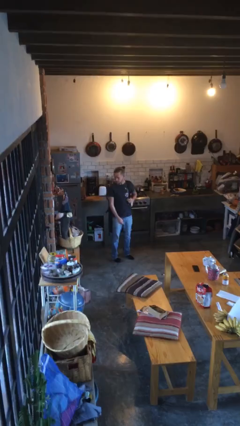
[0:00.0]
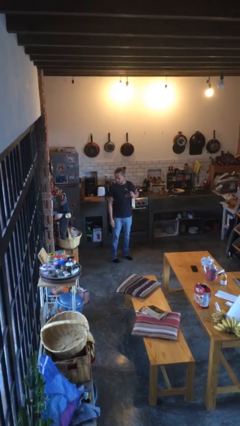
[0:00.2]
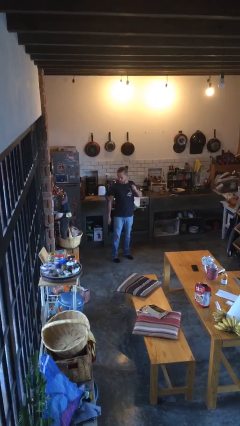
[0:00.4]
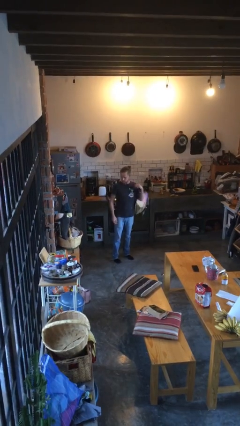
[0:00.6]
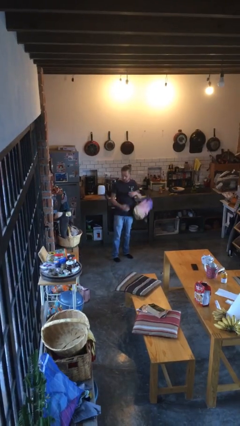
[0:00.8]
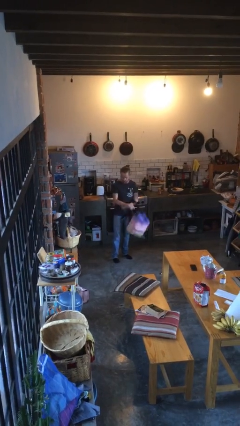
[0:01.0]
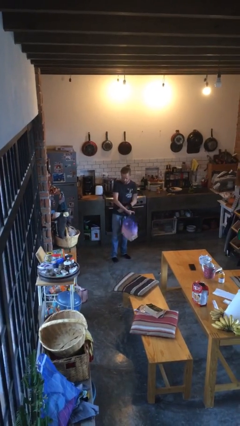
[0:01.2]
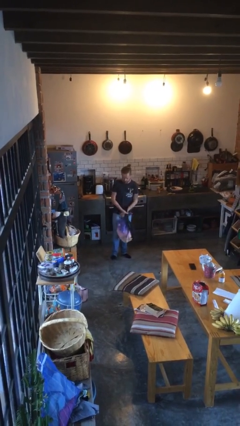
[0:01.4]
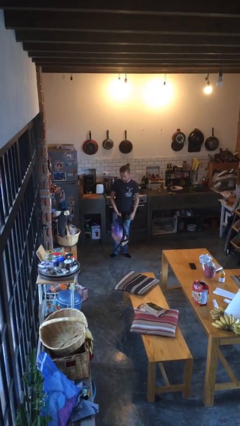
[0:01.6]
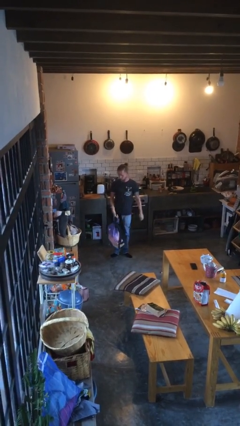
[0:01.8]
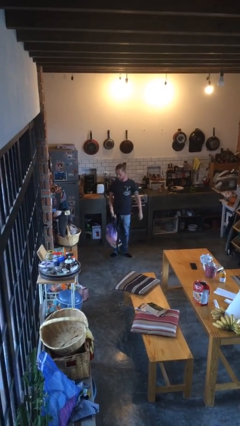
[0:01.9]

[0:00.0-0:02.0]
person takes off backpack

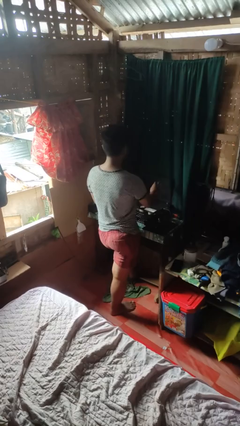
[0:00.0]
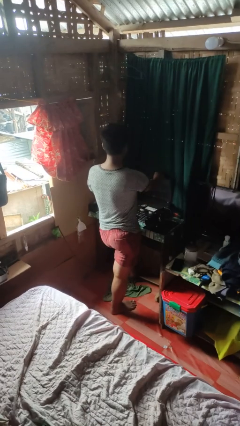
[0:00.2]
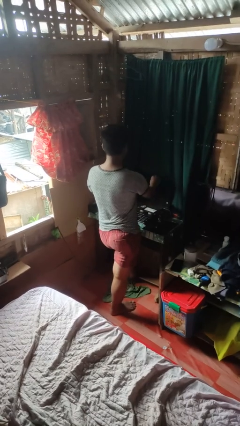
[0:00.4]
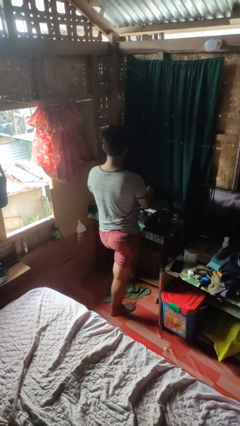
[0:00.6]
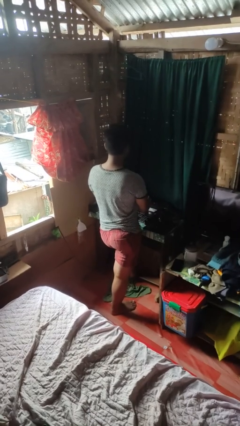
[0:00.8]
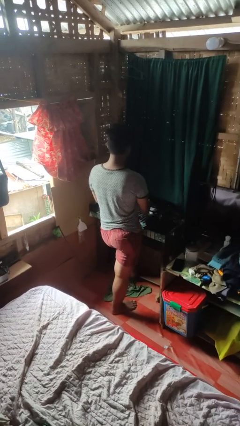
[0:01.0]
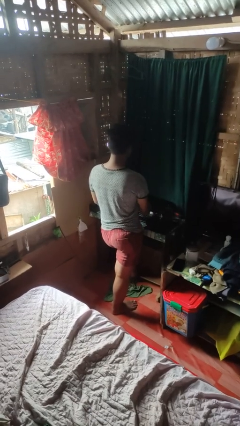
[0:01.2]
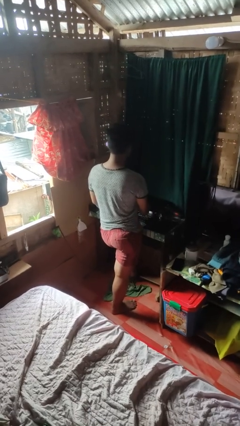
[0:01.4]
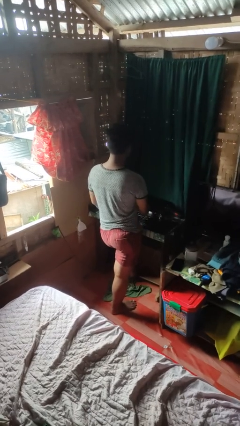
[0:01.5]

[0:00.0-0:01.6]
person closes laptop

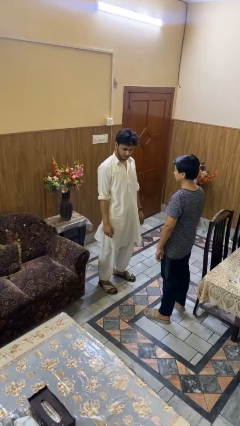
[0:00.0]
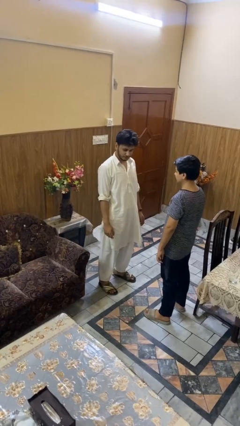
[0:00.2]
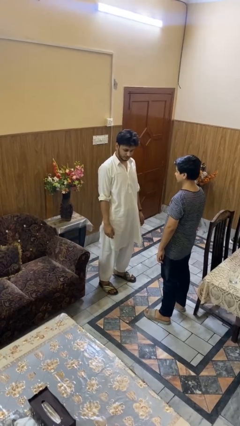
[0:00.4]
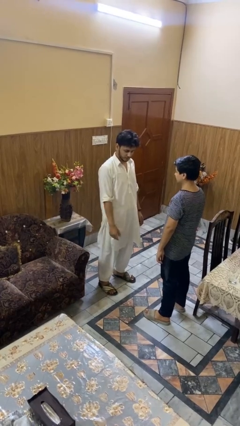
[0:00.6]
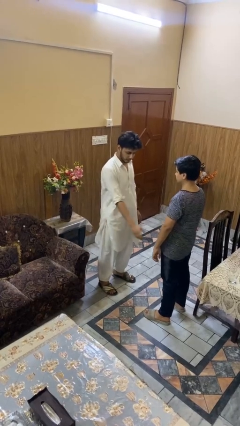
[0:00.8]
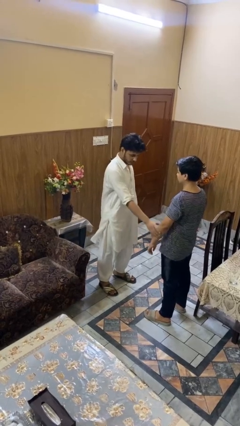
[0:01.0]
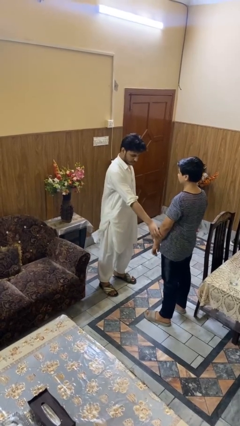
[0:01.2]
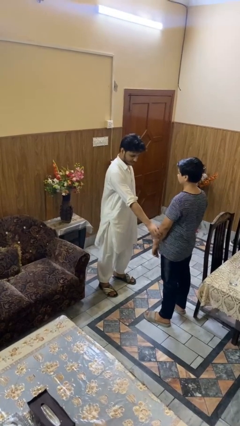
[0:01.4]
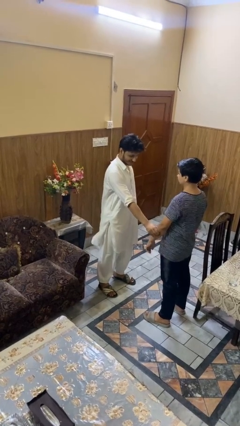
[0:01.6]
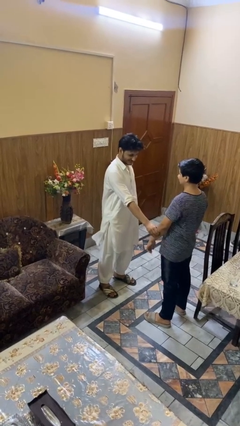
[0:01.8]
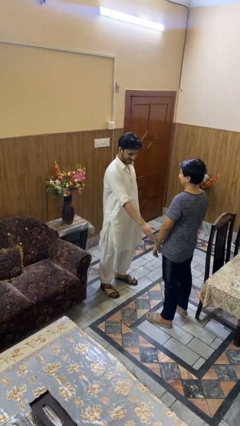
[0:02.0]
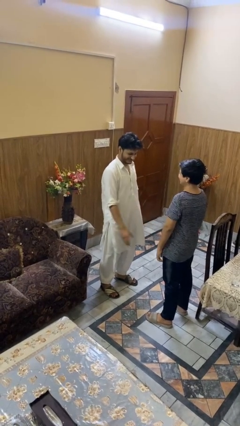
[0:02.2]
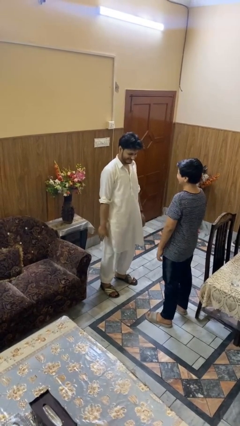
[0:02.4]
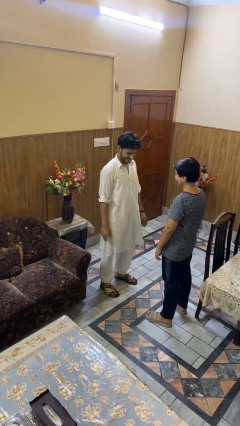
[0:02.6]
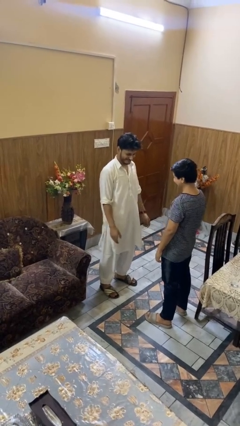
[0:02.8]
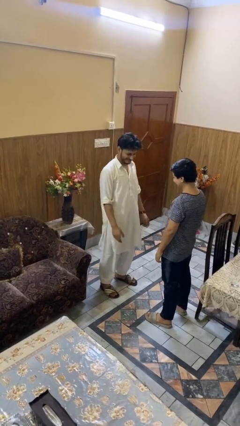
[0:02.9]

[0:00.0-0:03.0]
person grabs person by forearm

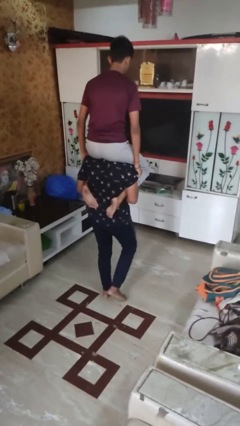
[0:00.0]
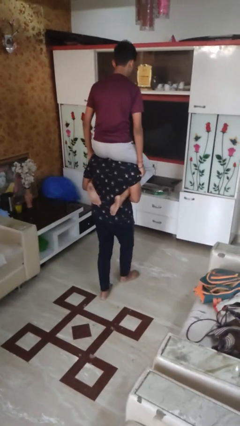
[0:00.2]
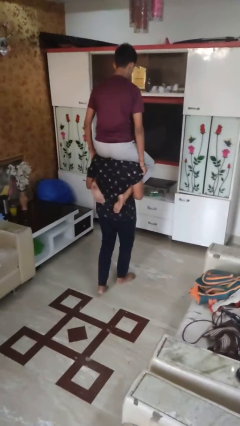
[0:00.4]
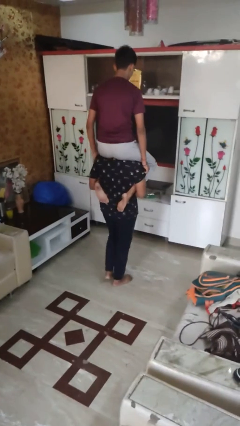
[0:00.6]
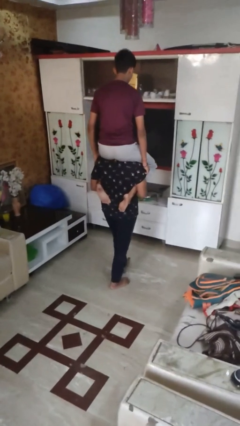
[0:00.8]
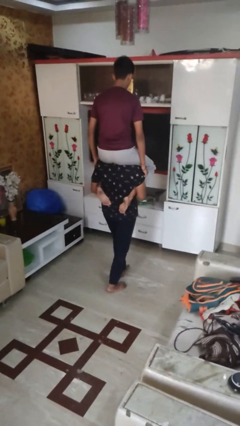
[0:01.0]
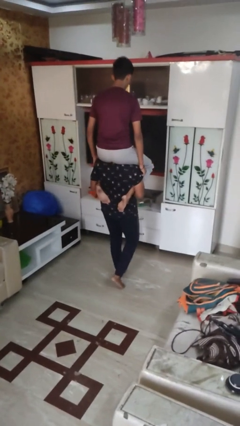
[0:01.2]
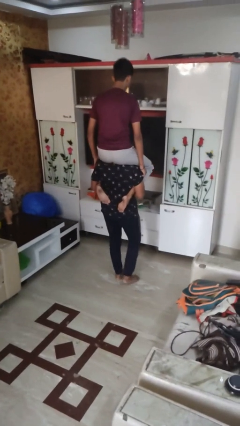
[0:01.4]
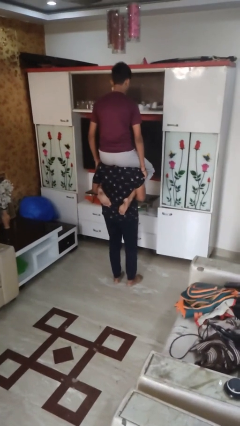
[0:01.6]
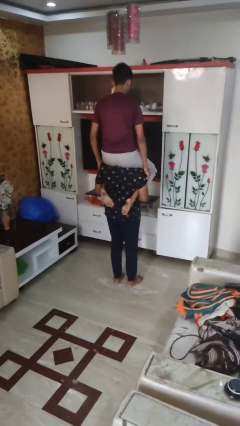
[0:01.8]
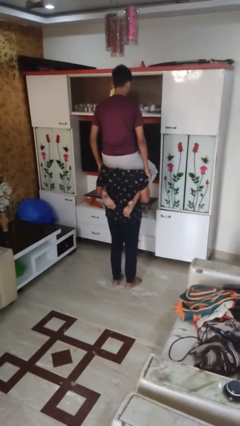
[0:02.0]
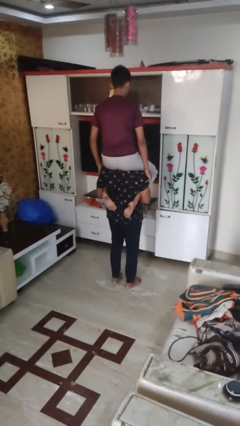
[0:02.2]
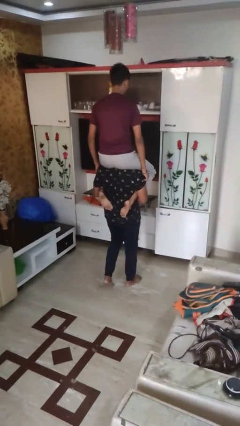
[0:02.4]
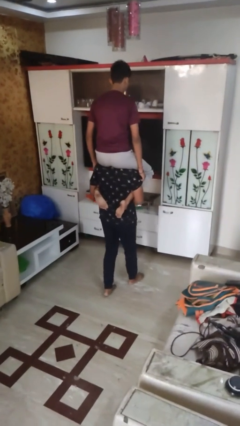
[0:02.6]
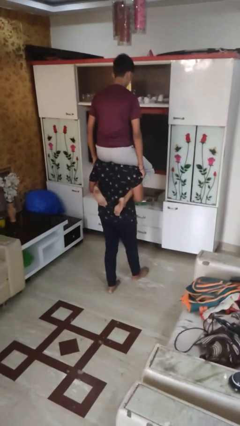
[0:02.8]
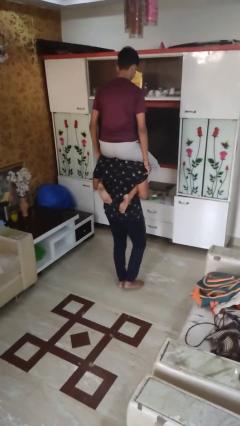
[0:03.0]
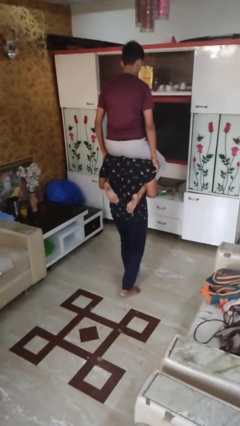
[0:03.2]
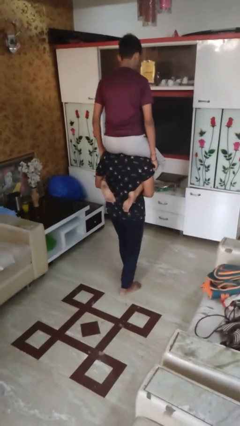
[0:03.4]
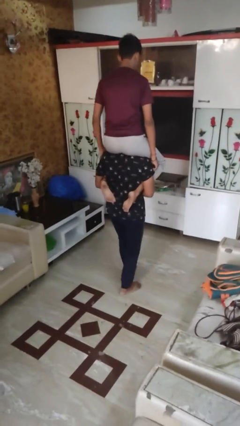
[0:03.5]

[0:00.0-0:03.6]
person carries person on shoulders

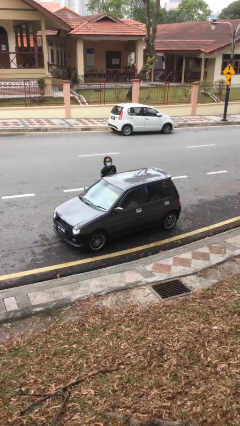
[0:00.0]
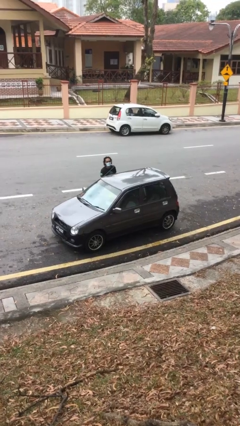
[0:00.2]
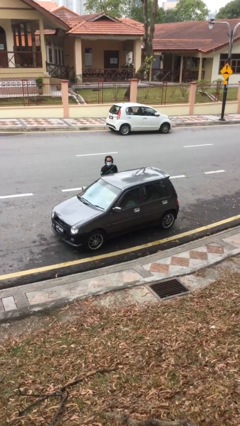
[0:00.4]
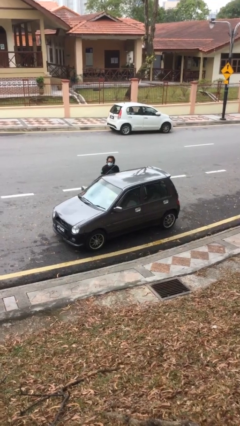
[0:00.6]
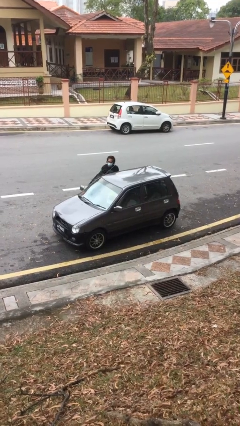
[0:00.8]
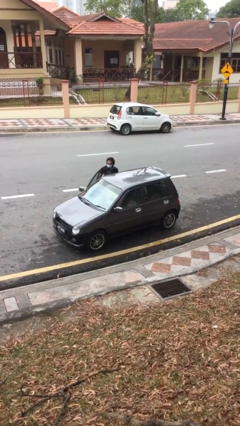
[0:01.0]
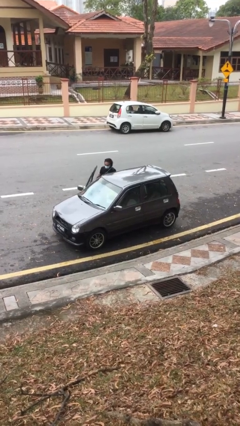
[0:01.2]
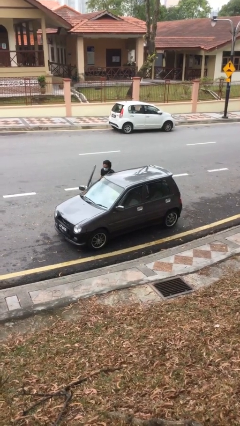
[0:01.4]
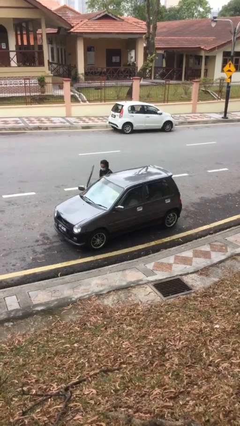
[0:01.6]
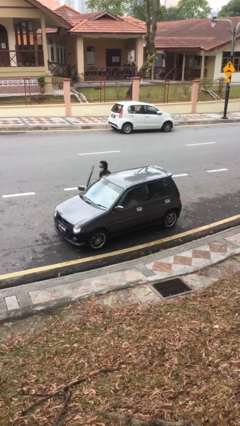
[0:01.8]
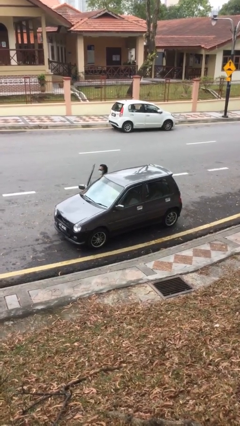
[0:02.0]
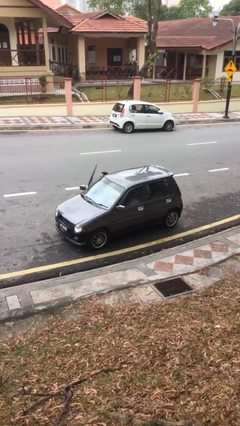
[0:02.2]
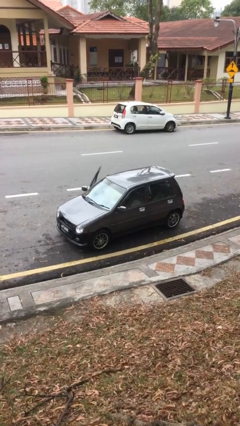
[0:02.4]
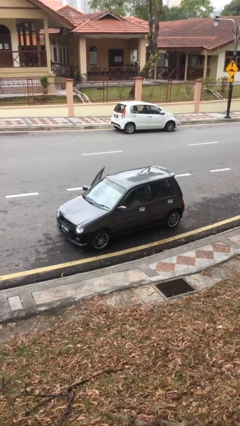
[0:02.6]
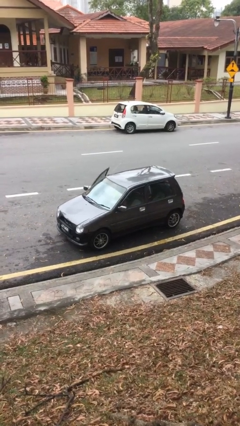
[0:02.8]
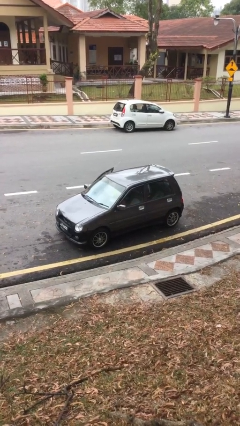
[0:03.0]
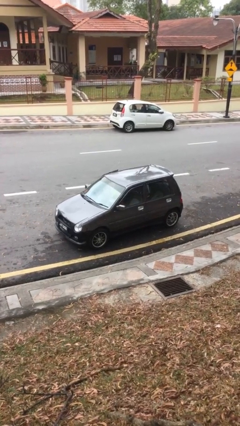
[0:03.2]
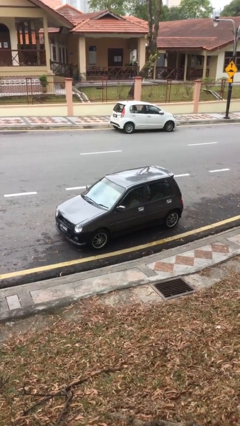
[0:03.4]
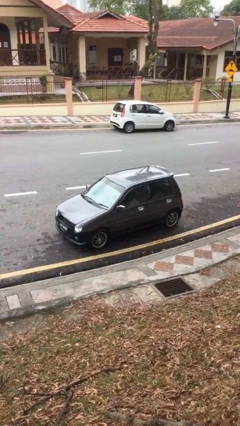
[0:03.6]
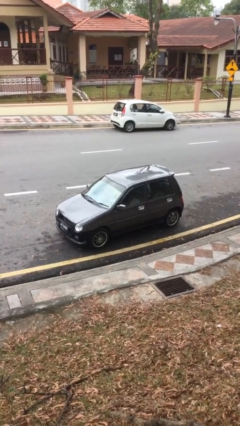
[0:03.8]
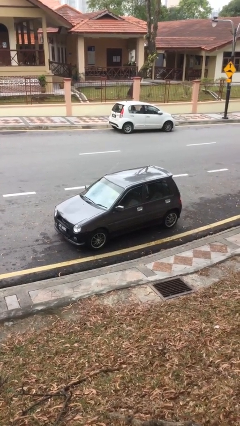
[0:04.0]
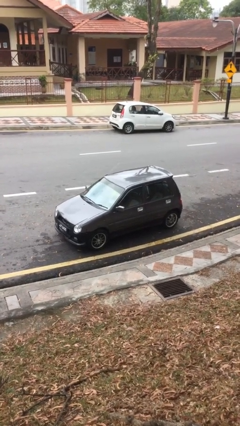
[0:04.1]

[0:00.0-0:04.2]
car picks up person

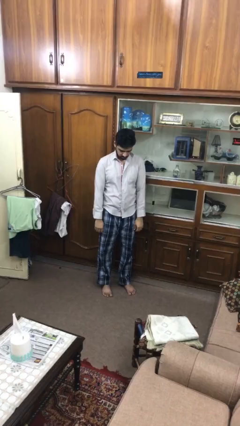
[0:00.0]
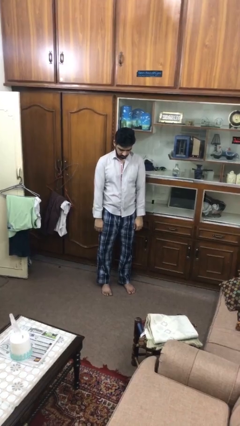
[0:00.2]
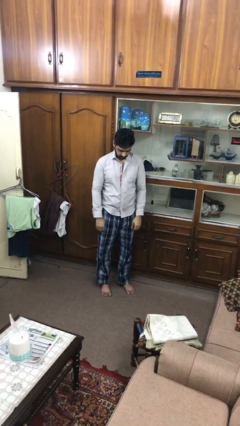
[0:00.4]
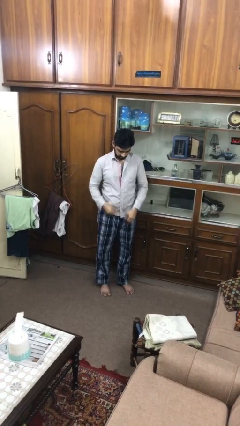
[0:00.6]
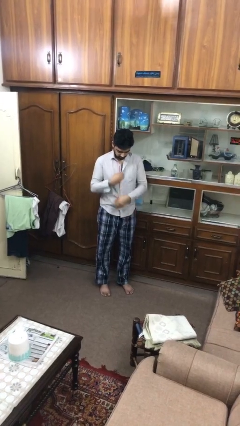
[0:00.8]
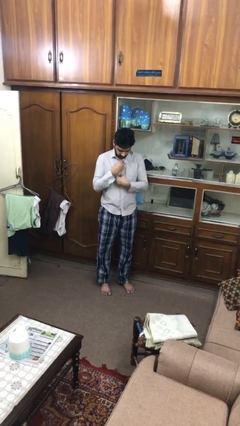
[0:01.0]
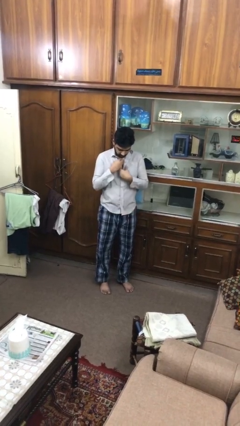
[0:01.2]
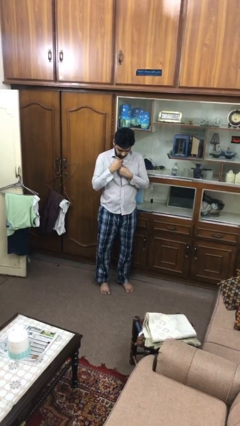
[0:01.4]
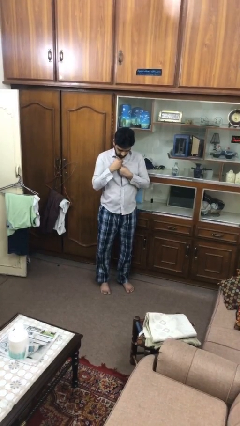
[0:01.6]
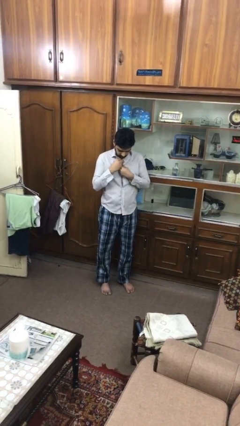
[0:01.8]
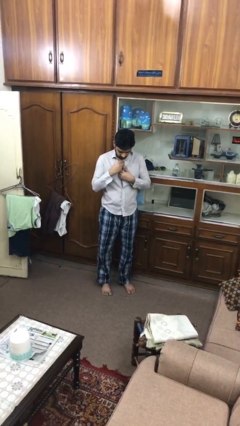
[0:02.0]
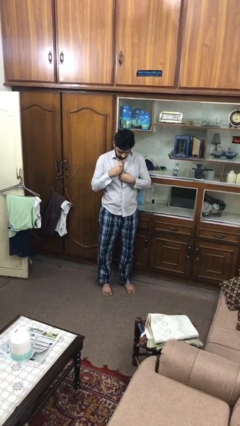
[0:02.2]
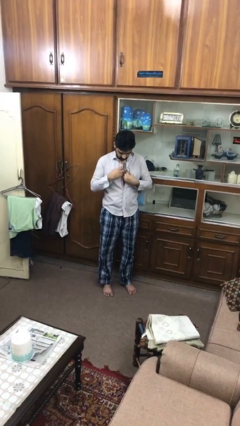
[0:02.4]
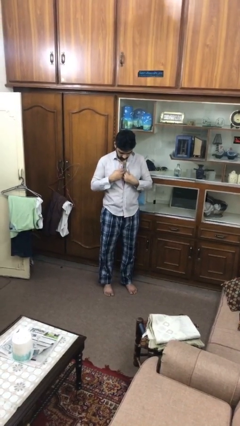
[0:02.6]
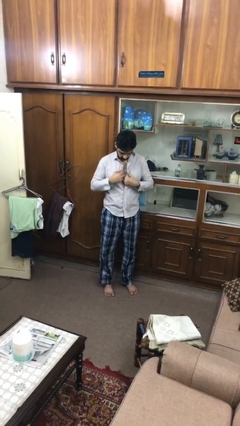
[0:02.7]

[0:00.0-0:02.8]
person unbuttons shirt

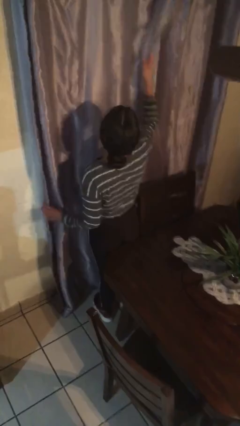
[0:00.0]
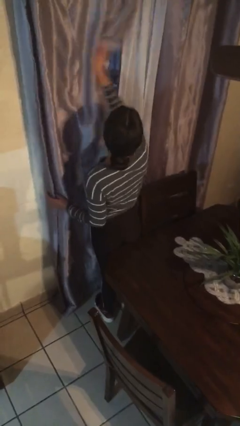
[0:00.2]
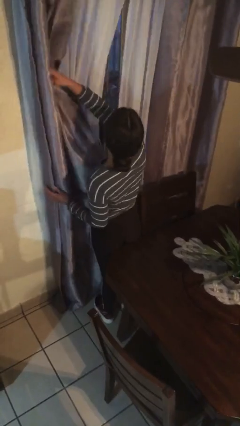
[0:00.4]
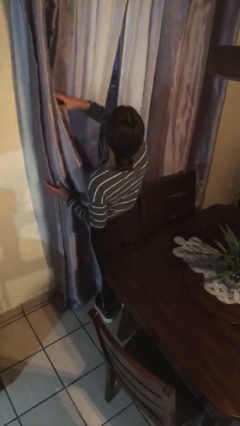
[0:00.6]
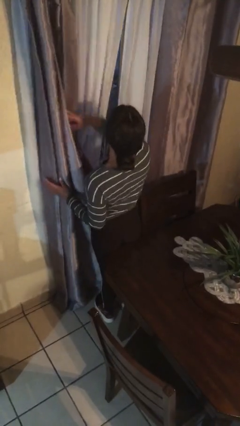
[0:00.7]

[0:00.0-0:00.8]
person opens curtains
